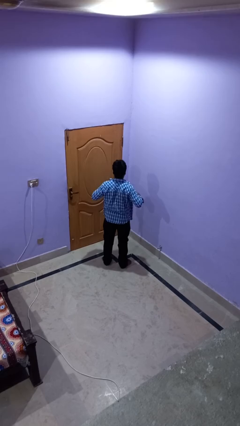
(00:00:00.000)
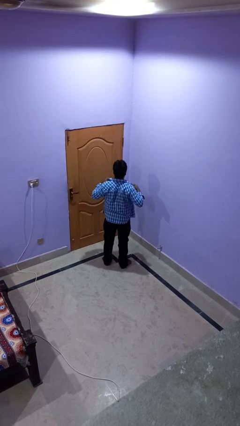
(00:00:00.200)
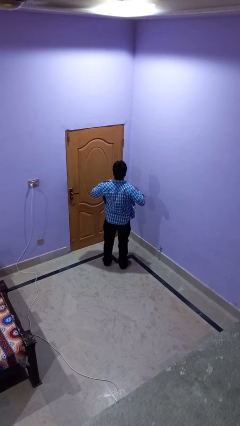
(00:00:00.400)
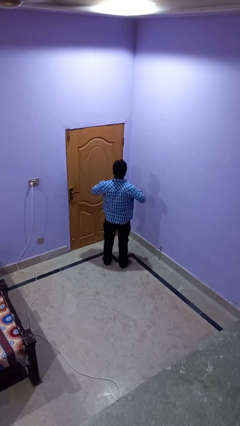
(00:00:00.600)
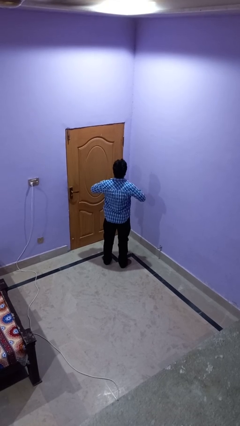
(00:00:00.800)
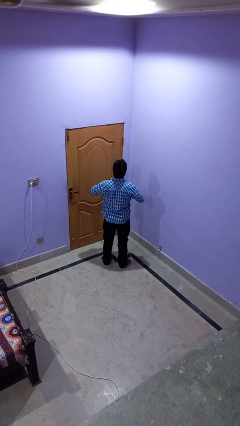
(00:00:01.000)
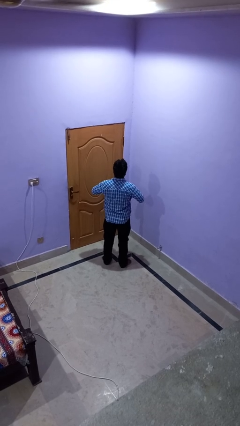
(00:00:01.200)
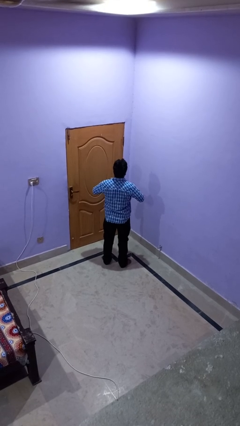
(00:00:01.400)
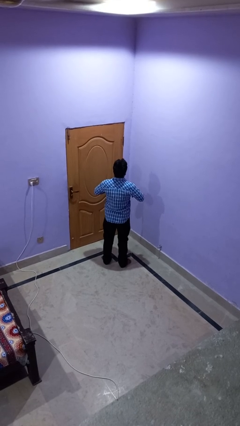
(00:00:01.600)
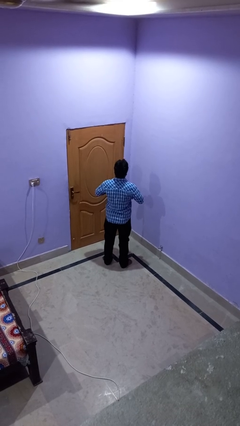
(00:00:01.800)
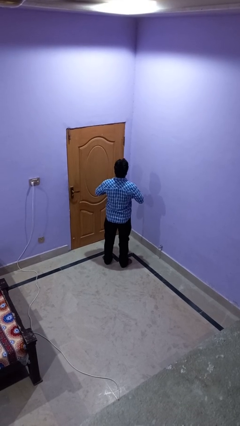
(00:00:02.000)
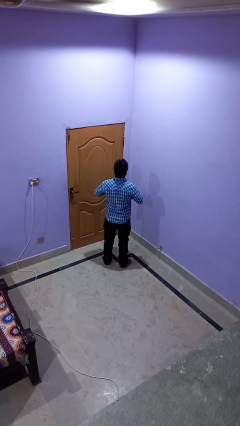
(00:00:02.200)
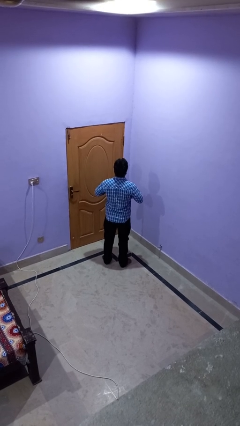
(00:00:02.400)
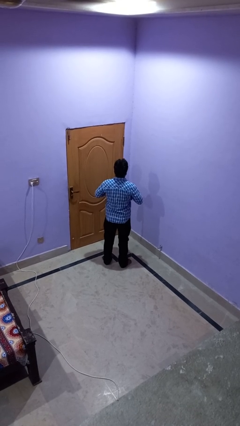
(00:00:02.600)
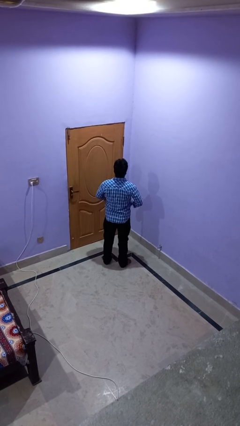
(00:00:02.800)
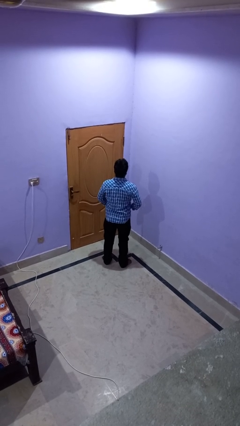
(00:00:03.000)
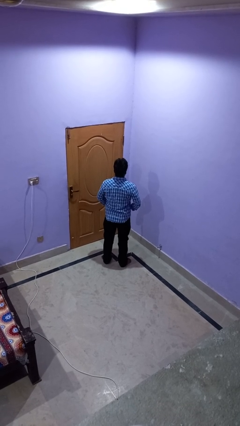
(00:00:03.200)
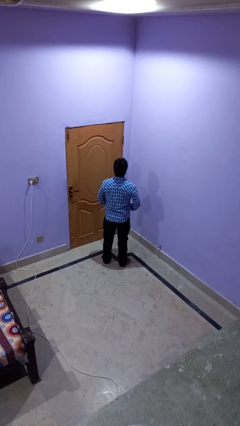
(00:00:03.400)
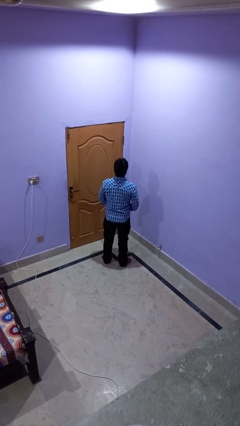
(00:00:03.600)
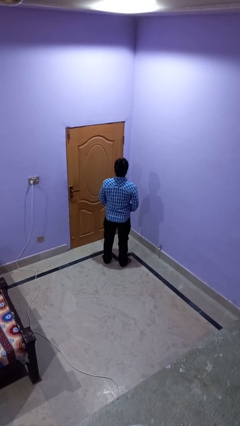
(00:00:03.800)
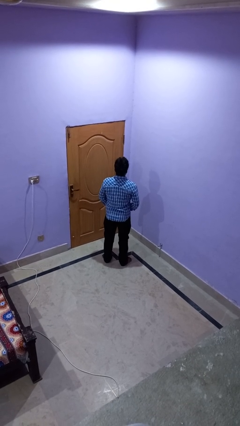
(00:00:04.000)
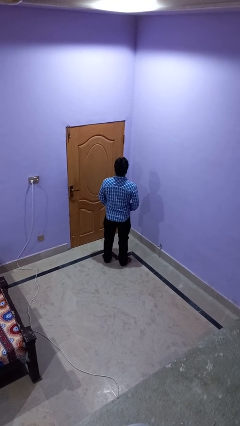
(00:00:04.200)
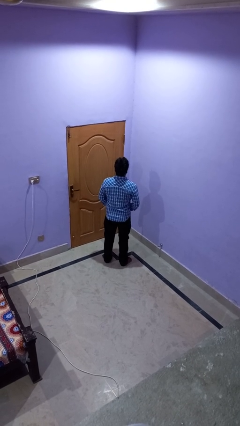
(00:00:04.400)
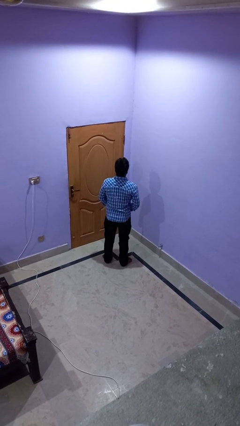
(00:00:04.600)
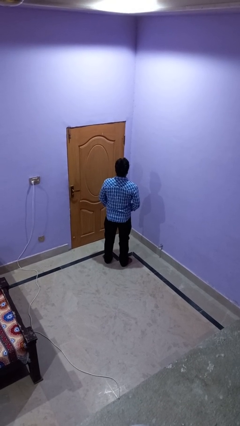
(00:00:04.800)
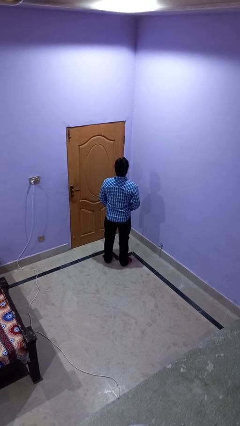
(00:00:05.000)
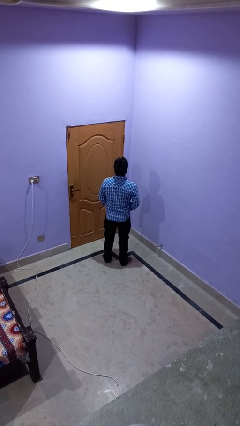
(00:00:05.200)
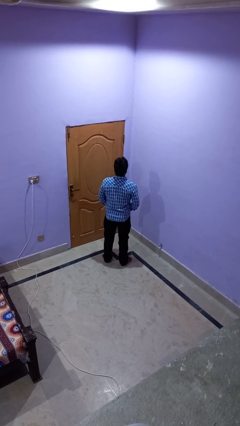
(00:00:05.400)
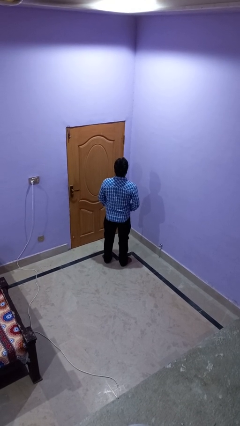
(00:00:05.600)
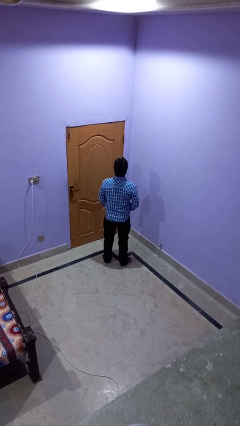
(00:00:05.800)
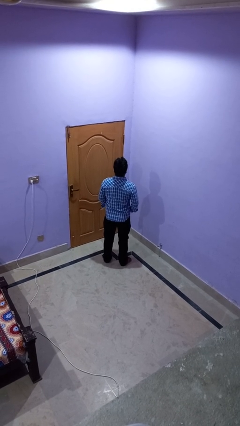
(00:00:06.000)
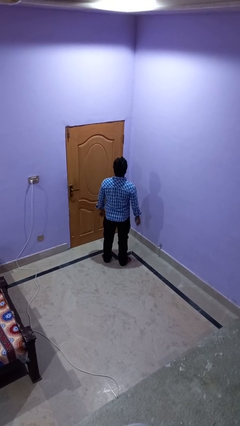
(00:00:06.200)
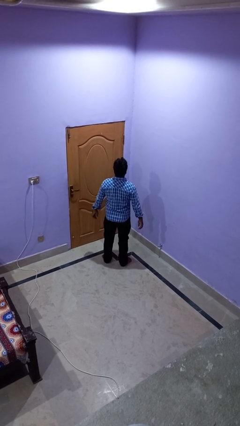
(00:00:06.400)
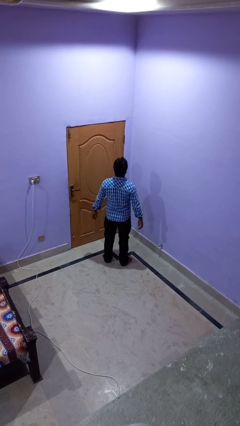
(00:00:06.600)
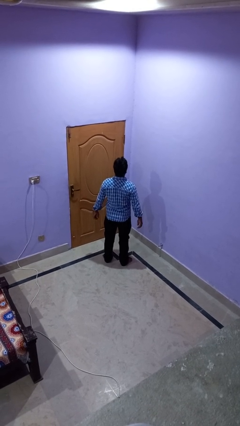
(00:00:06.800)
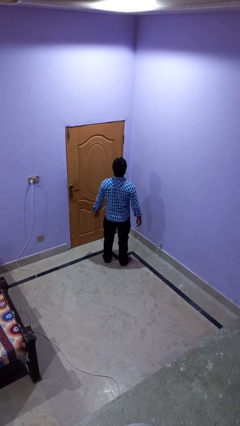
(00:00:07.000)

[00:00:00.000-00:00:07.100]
person buttons shirt

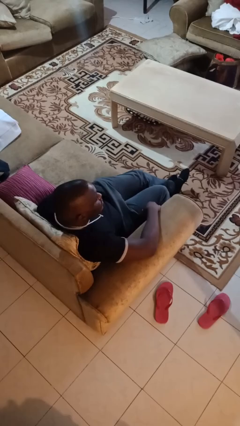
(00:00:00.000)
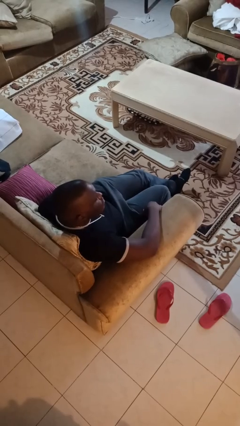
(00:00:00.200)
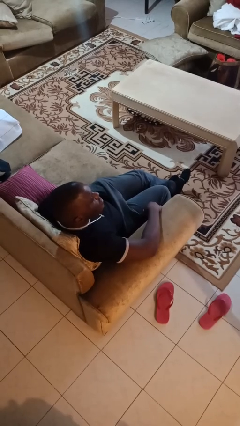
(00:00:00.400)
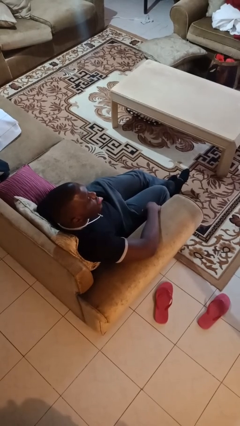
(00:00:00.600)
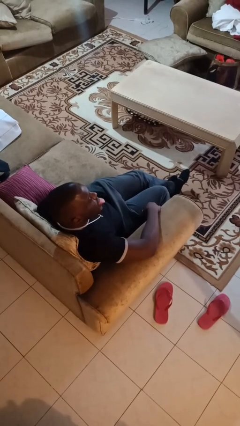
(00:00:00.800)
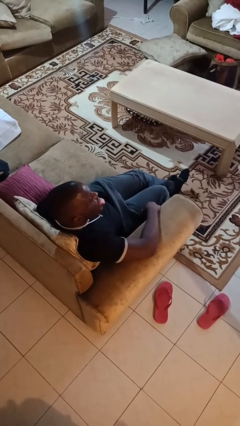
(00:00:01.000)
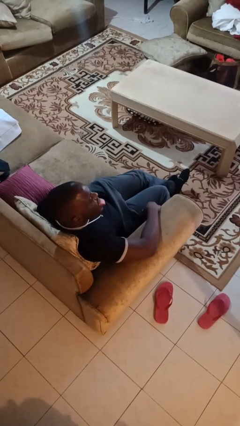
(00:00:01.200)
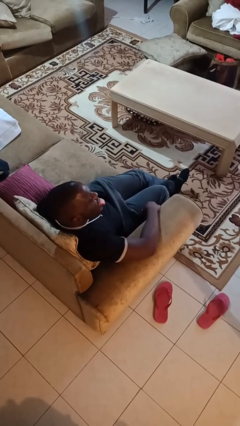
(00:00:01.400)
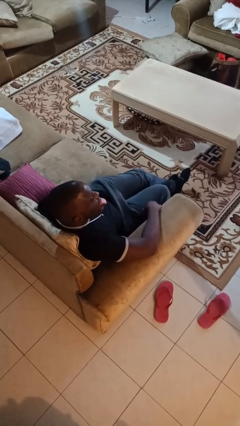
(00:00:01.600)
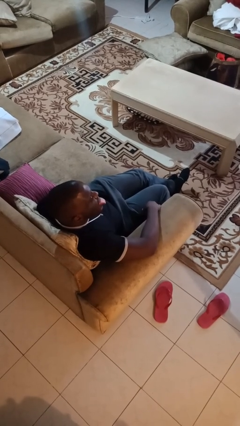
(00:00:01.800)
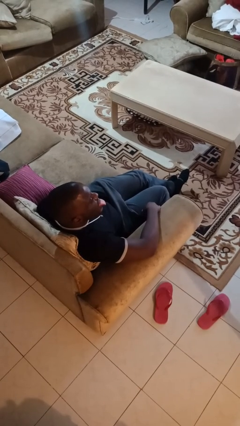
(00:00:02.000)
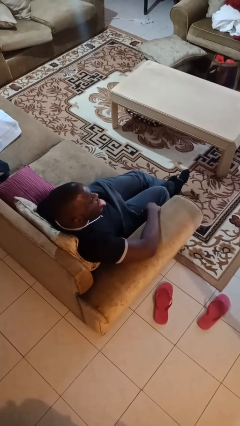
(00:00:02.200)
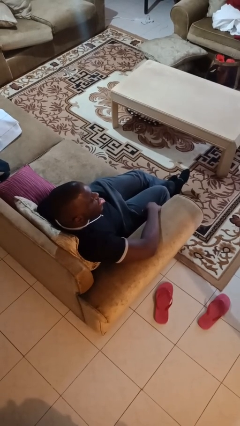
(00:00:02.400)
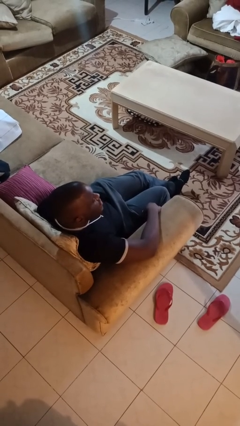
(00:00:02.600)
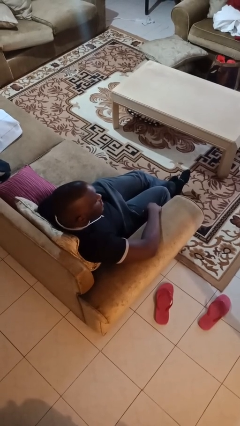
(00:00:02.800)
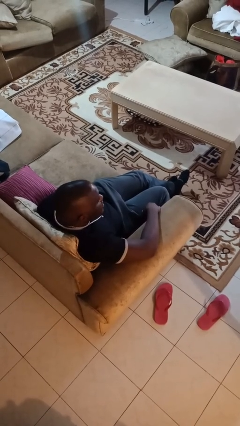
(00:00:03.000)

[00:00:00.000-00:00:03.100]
person sticks out tongue

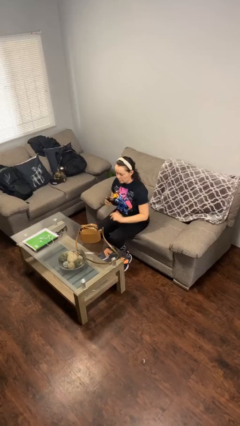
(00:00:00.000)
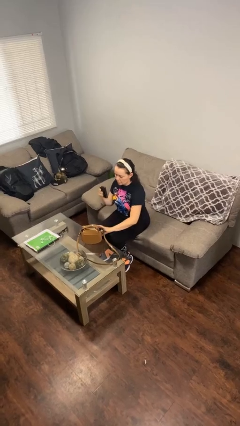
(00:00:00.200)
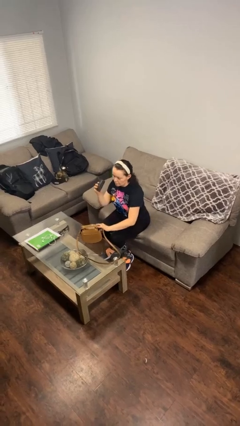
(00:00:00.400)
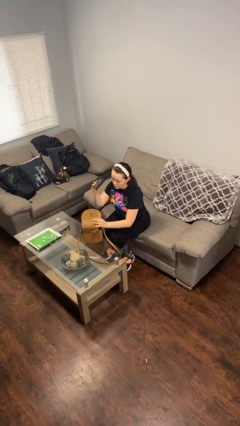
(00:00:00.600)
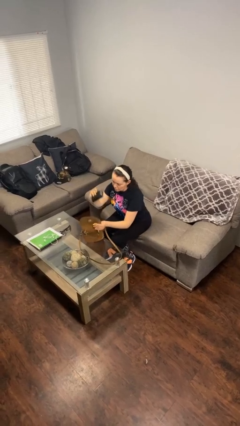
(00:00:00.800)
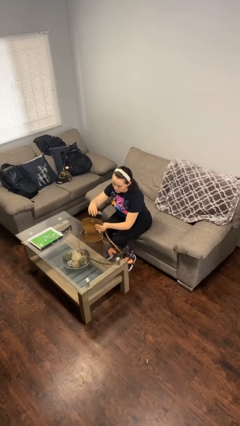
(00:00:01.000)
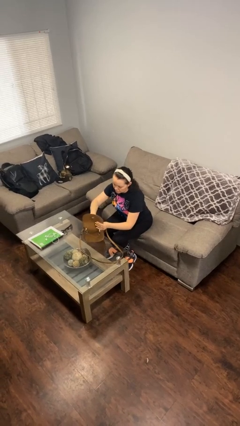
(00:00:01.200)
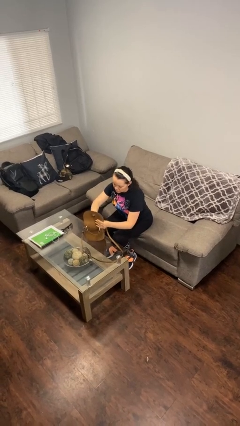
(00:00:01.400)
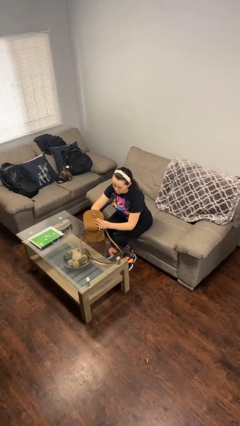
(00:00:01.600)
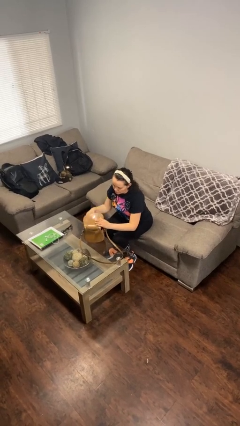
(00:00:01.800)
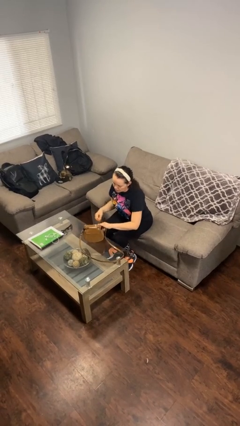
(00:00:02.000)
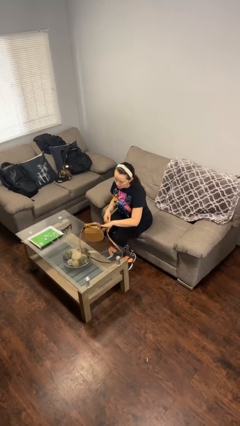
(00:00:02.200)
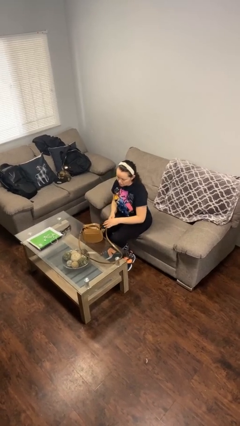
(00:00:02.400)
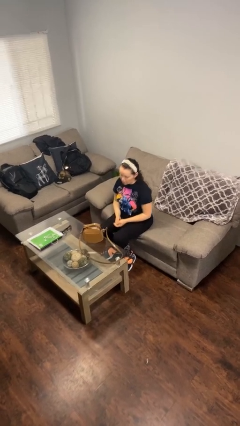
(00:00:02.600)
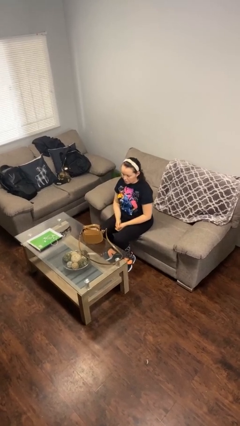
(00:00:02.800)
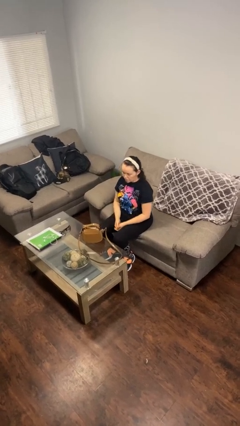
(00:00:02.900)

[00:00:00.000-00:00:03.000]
person puts object into purse

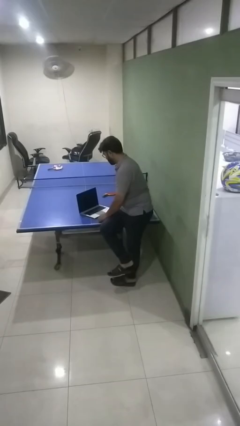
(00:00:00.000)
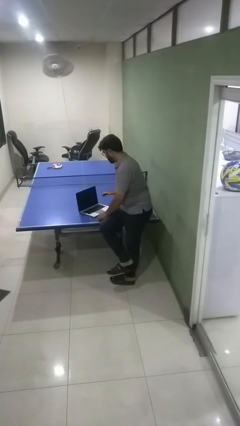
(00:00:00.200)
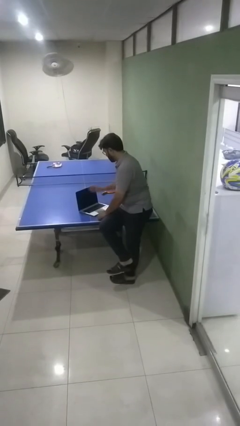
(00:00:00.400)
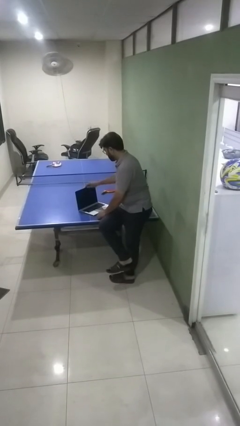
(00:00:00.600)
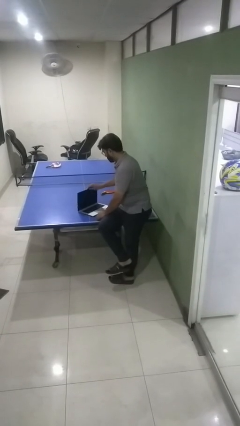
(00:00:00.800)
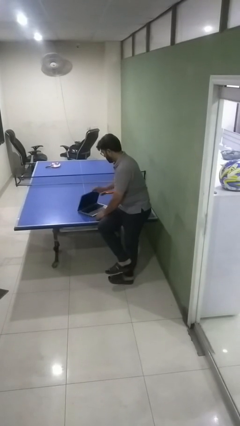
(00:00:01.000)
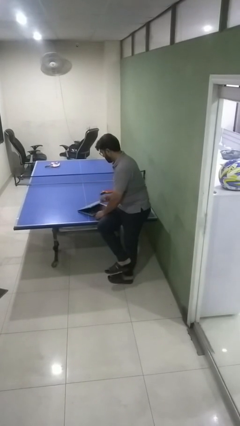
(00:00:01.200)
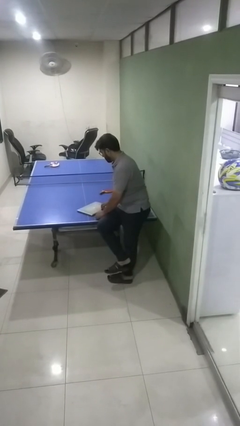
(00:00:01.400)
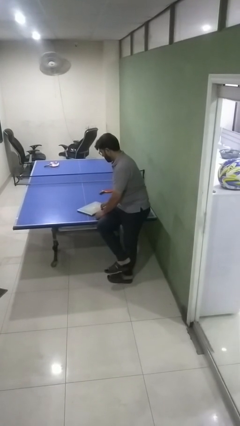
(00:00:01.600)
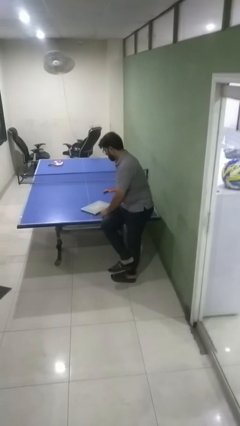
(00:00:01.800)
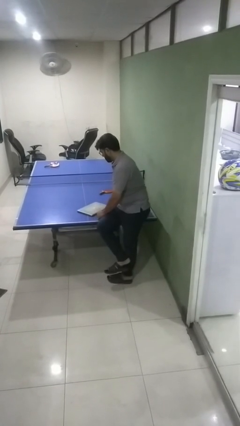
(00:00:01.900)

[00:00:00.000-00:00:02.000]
person closes laptop

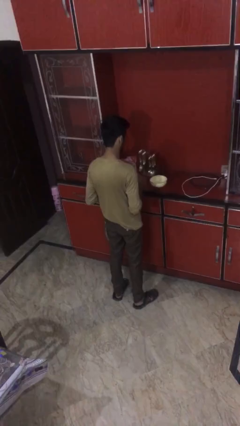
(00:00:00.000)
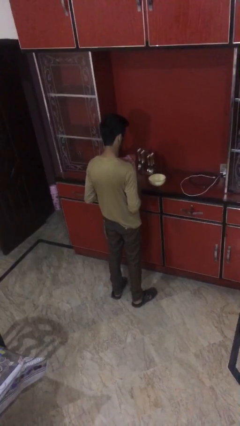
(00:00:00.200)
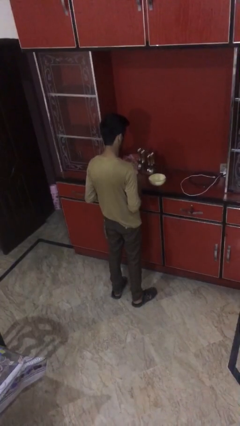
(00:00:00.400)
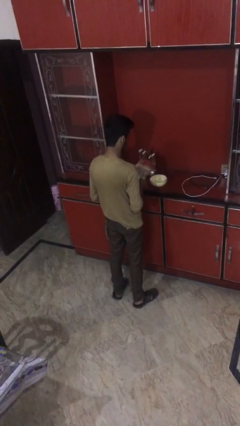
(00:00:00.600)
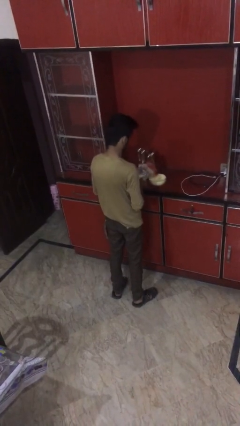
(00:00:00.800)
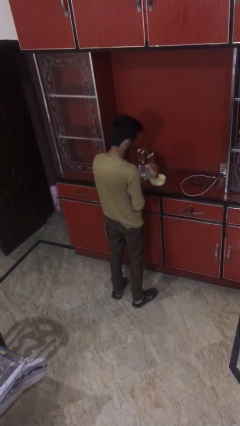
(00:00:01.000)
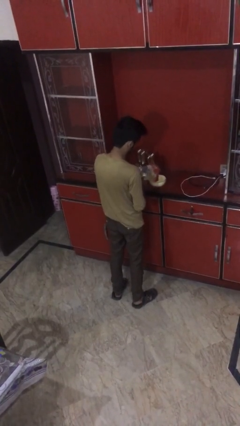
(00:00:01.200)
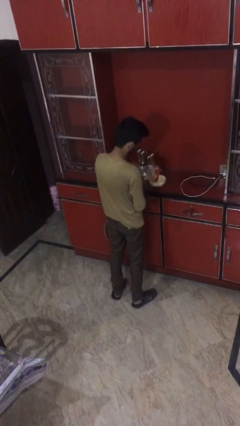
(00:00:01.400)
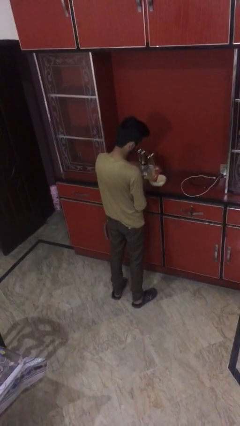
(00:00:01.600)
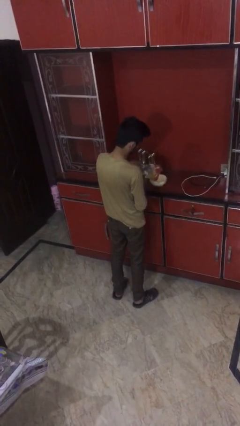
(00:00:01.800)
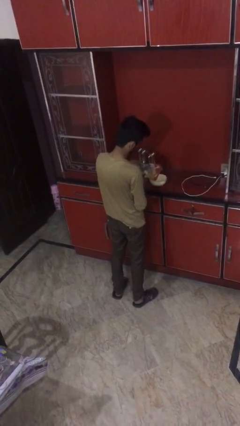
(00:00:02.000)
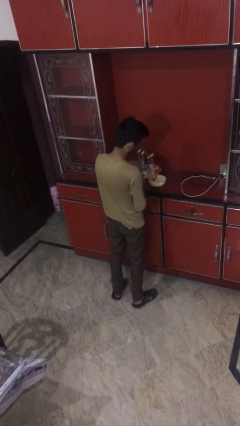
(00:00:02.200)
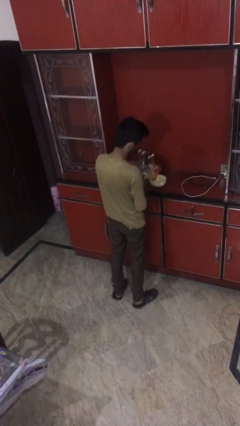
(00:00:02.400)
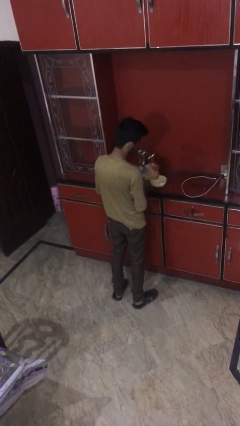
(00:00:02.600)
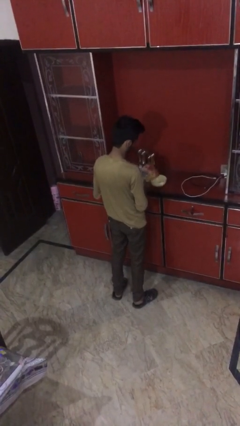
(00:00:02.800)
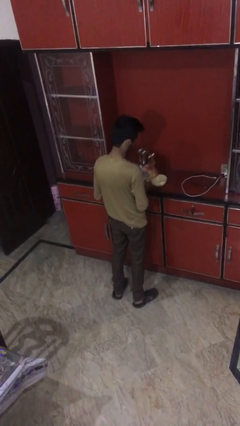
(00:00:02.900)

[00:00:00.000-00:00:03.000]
person pours into bowl
